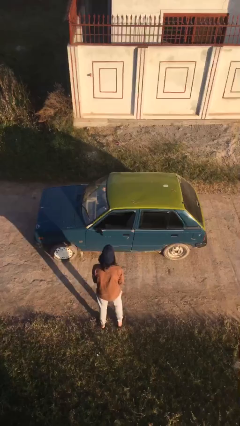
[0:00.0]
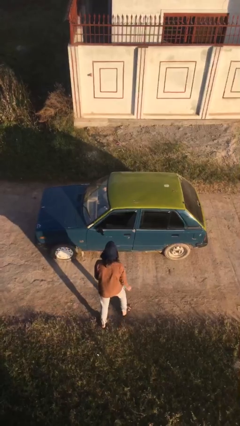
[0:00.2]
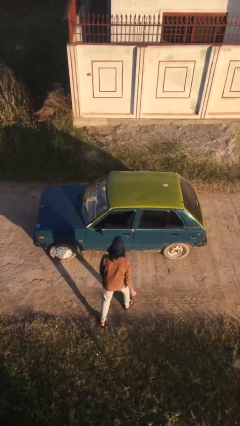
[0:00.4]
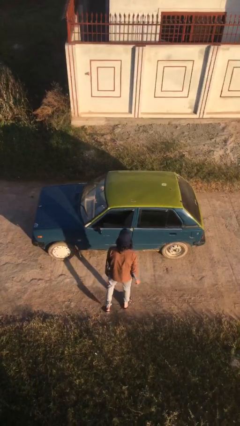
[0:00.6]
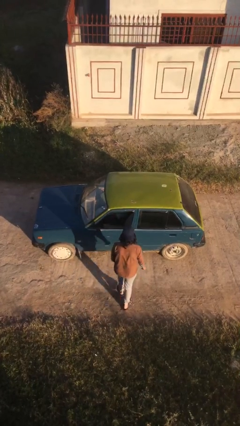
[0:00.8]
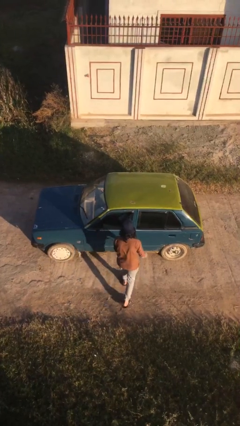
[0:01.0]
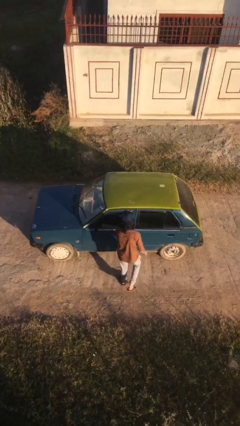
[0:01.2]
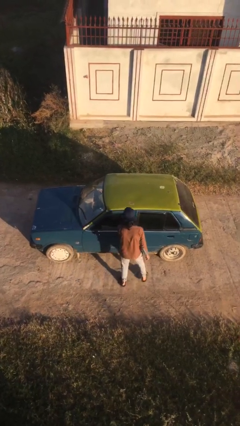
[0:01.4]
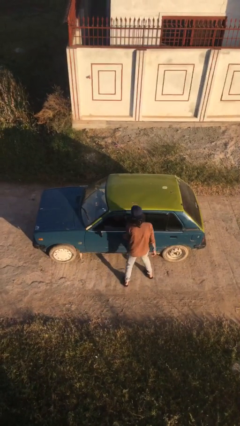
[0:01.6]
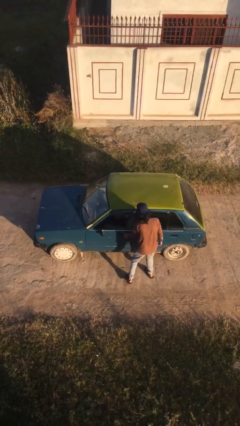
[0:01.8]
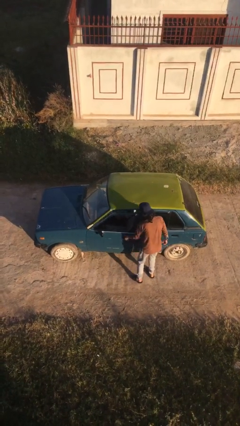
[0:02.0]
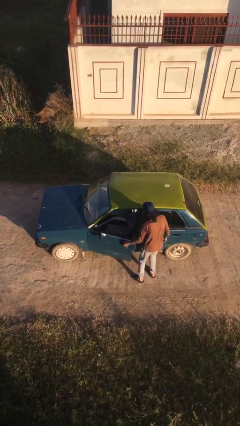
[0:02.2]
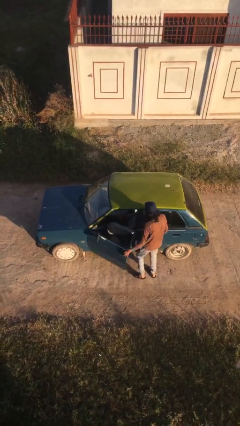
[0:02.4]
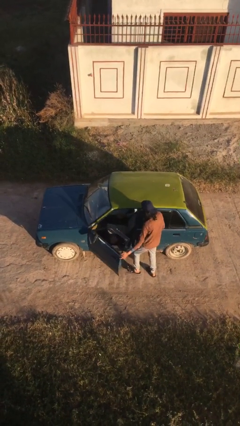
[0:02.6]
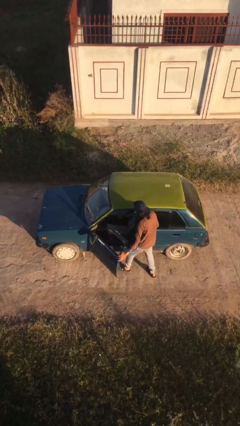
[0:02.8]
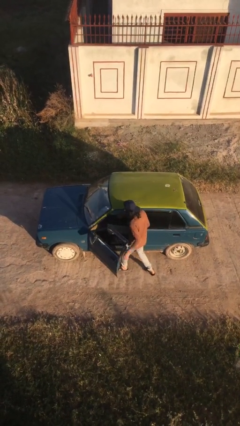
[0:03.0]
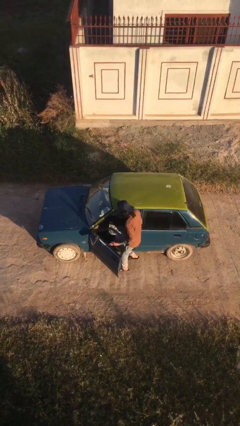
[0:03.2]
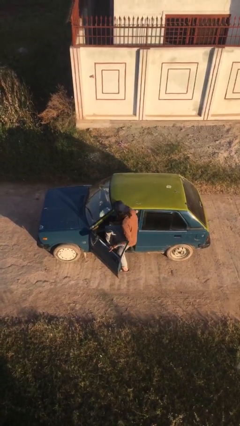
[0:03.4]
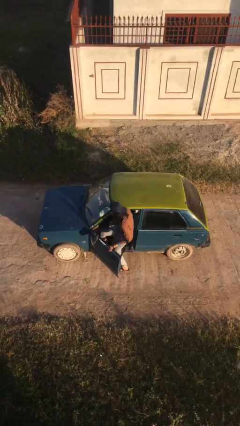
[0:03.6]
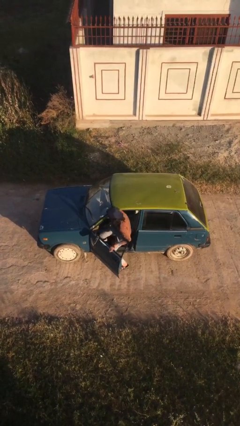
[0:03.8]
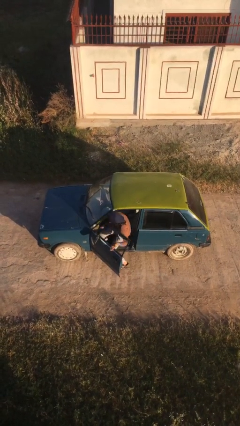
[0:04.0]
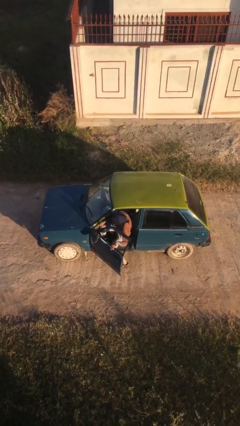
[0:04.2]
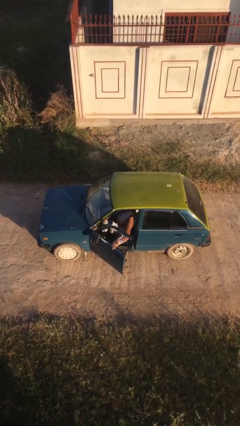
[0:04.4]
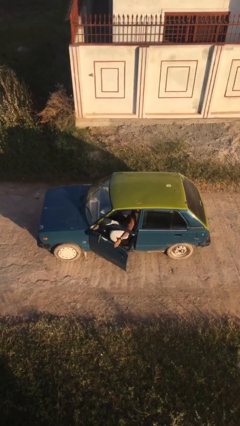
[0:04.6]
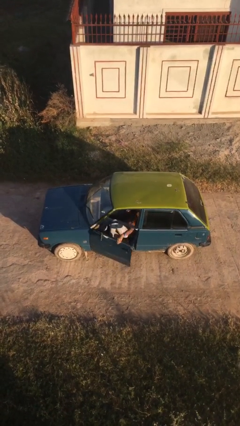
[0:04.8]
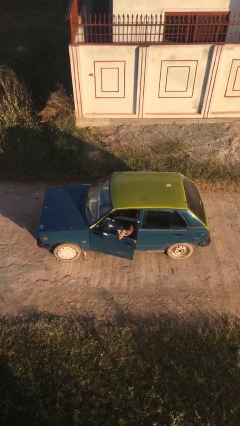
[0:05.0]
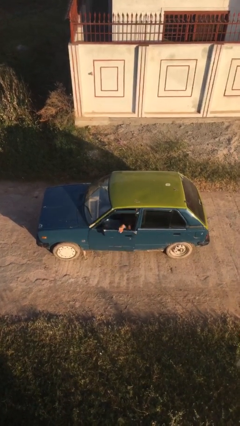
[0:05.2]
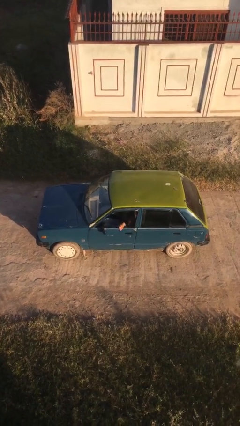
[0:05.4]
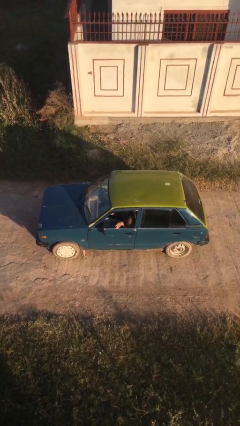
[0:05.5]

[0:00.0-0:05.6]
car picks up person

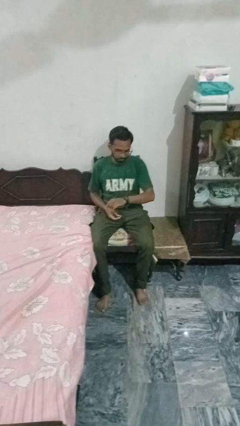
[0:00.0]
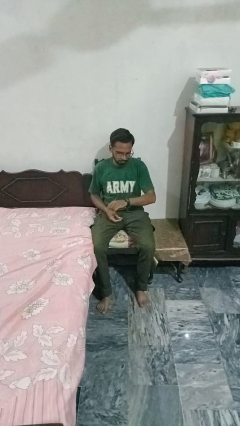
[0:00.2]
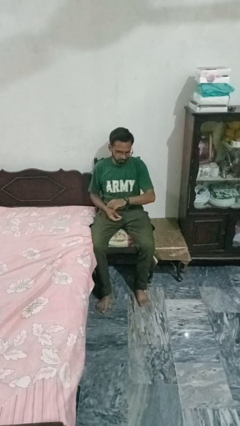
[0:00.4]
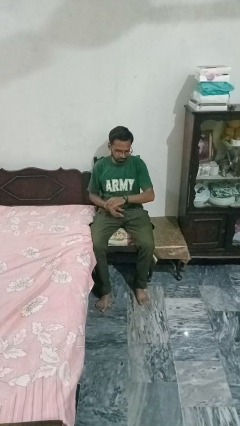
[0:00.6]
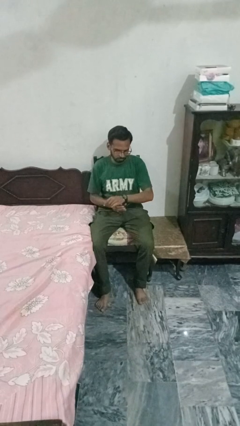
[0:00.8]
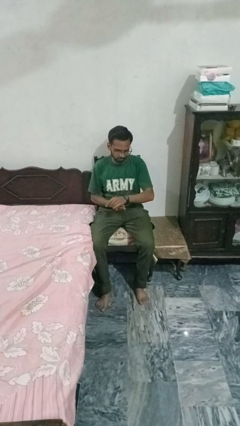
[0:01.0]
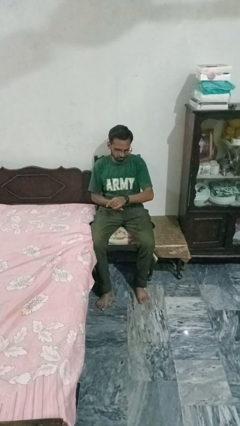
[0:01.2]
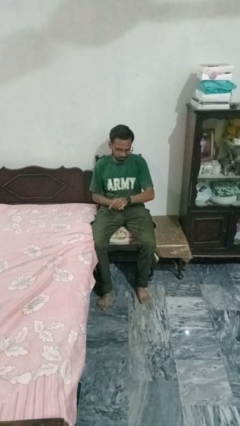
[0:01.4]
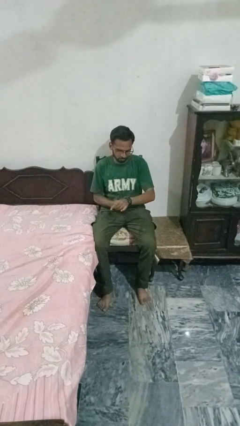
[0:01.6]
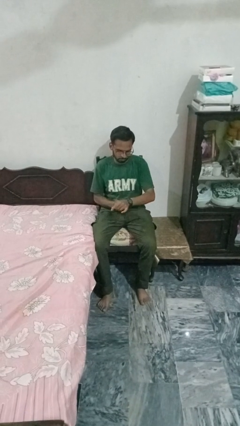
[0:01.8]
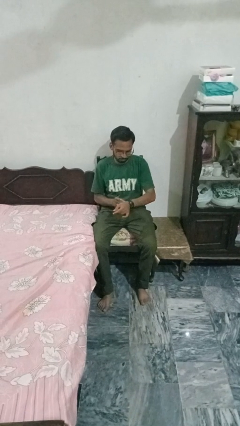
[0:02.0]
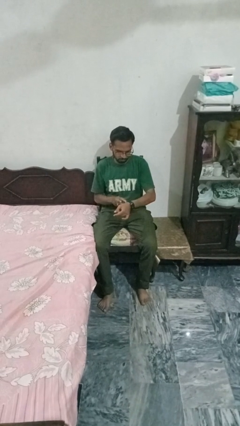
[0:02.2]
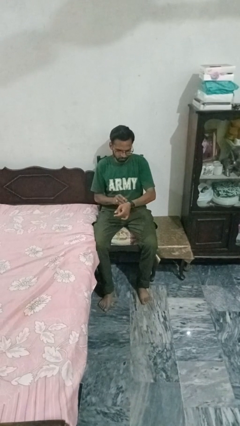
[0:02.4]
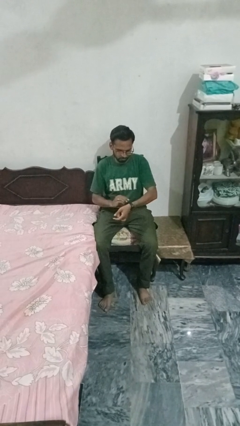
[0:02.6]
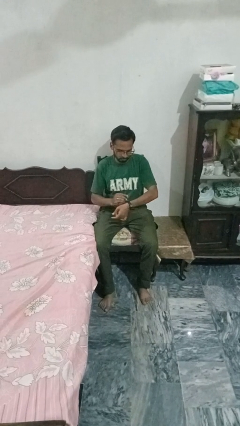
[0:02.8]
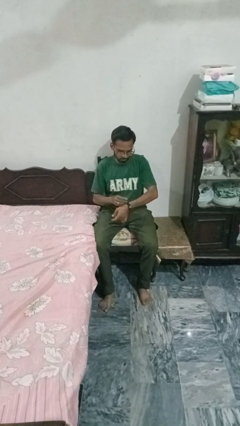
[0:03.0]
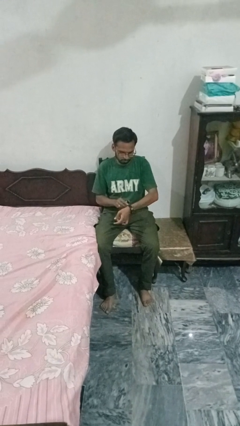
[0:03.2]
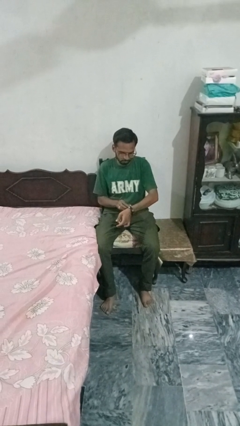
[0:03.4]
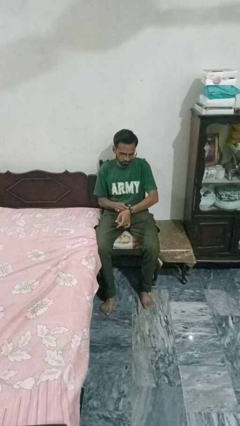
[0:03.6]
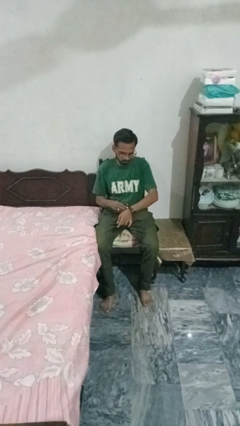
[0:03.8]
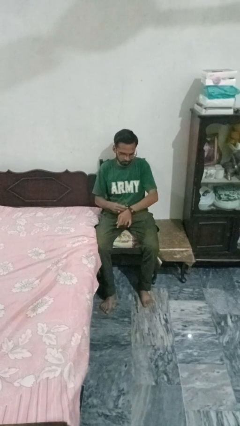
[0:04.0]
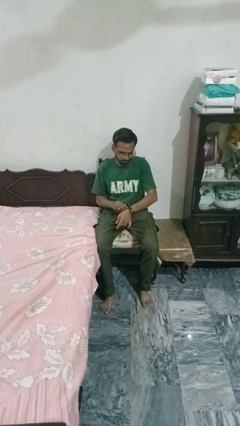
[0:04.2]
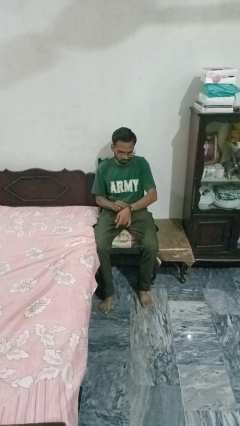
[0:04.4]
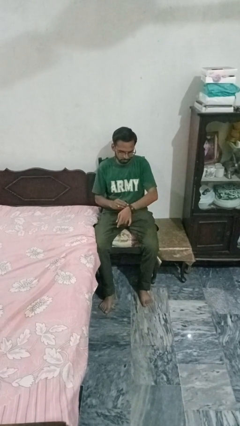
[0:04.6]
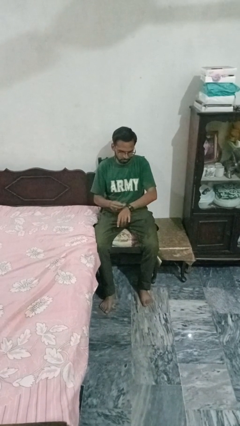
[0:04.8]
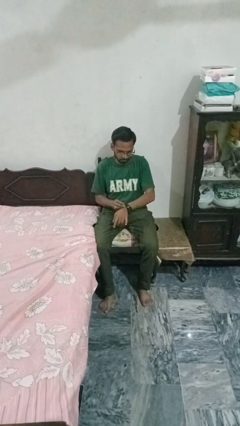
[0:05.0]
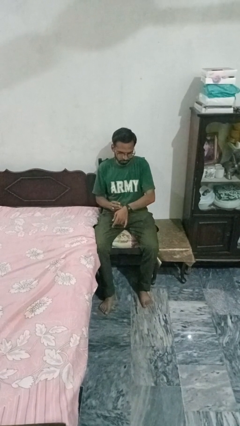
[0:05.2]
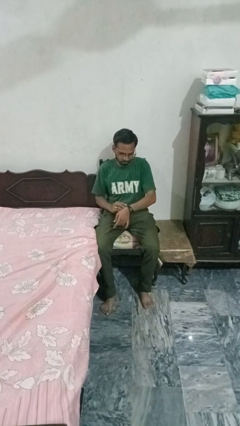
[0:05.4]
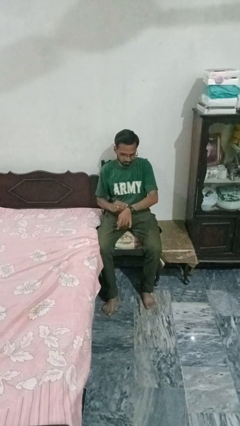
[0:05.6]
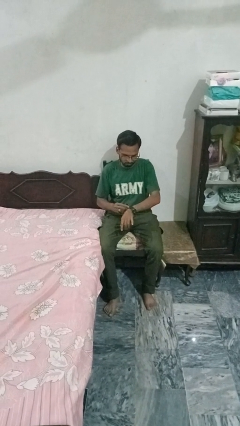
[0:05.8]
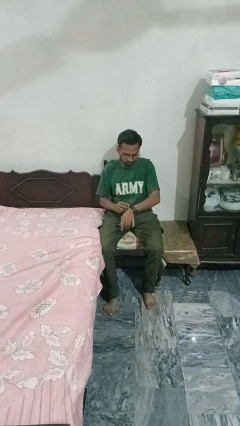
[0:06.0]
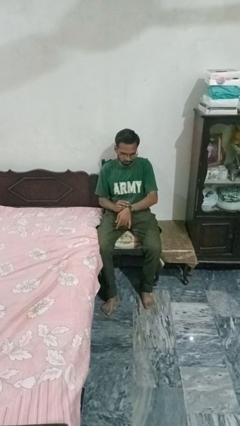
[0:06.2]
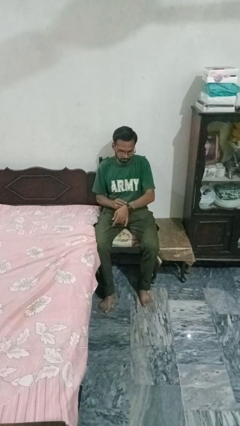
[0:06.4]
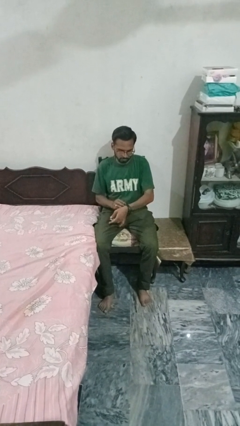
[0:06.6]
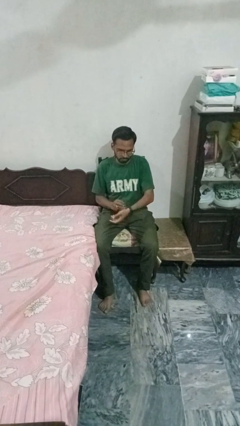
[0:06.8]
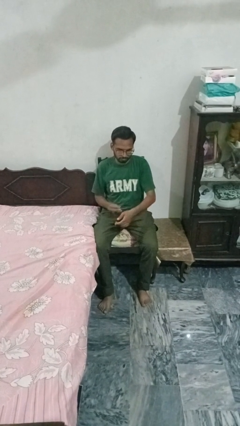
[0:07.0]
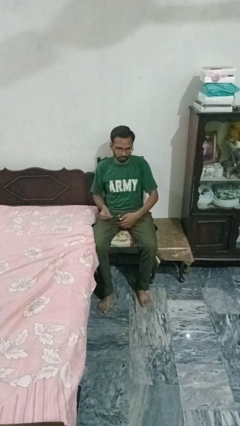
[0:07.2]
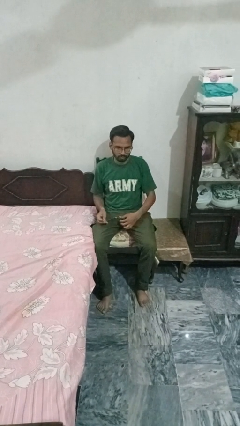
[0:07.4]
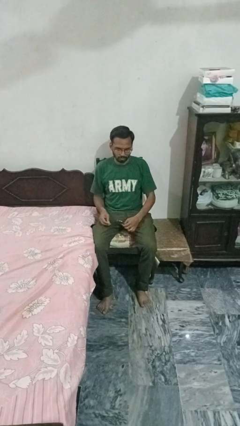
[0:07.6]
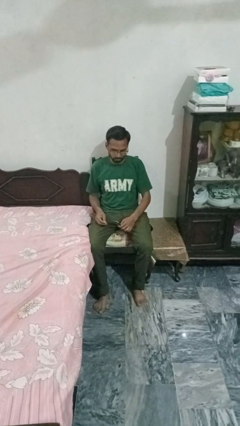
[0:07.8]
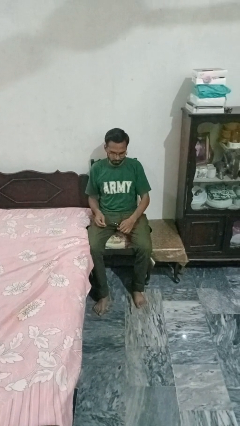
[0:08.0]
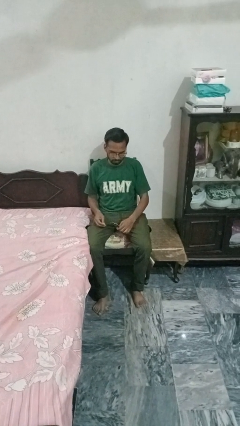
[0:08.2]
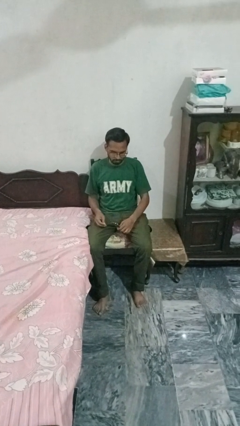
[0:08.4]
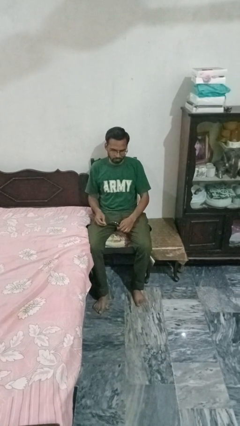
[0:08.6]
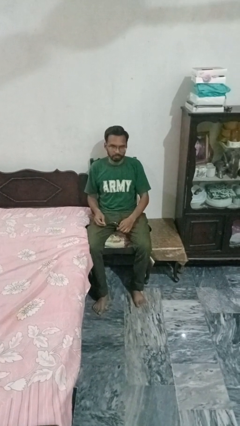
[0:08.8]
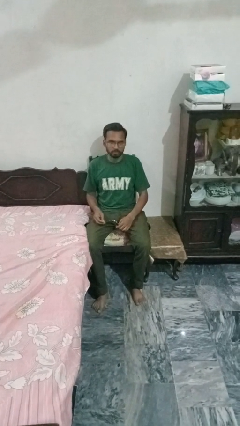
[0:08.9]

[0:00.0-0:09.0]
person takes off wristwatch

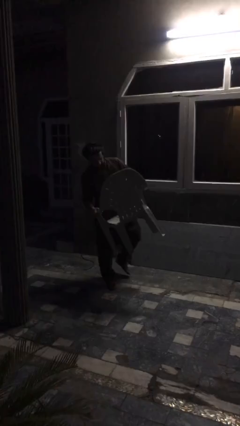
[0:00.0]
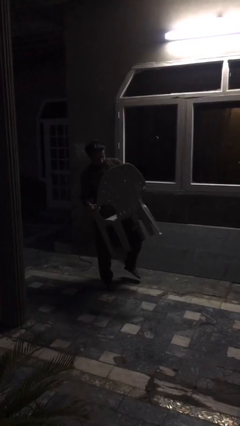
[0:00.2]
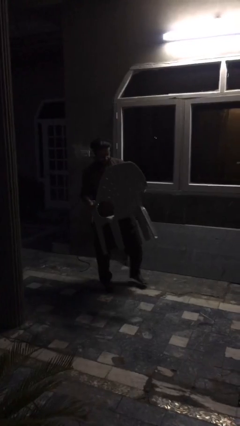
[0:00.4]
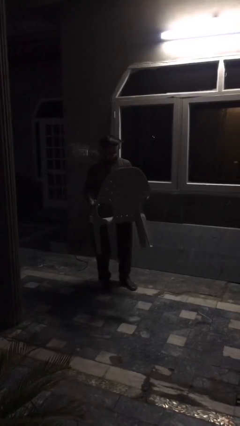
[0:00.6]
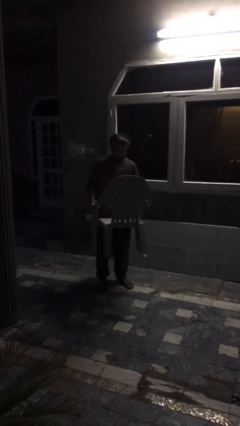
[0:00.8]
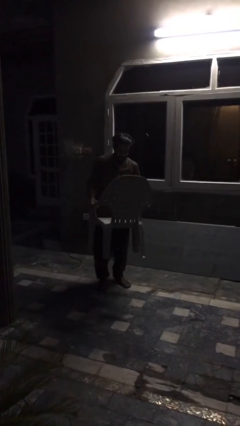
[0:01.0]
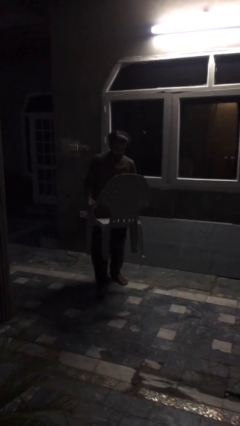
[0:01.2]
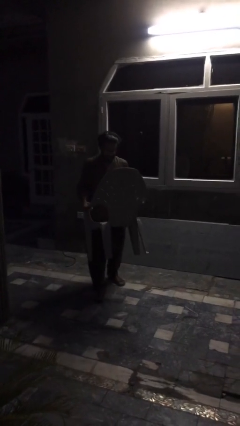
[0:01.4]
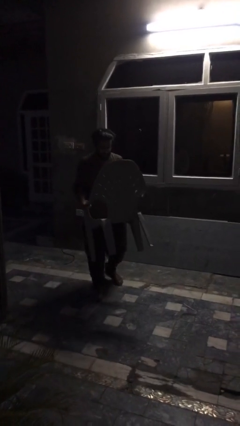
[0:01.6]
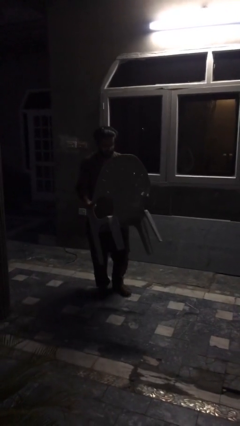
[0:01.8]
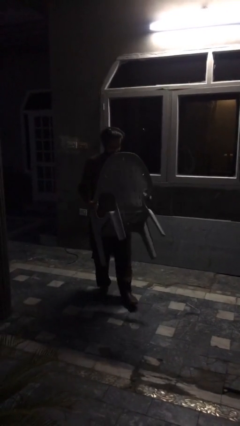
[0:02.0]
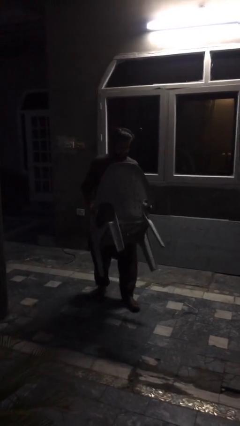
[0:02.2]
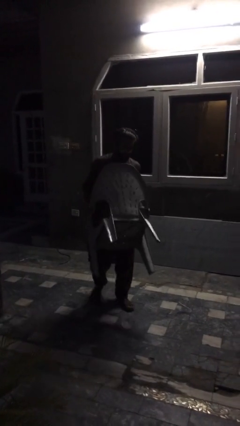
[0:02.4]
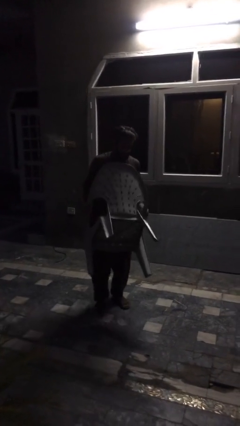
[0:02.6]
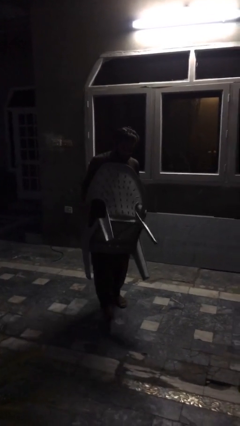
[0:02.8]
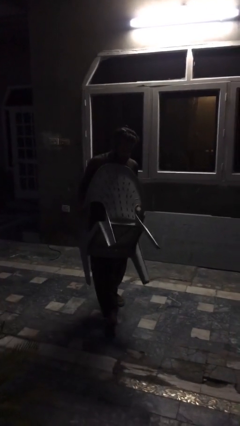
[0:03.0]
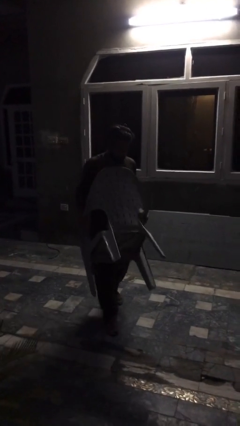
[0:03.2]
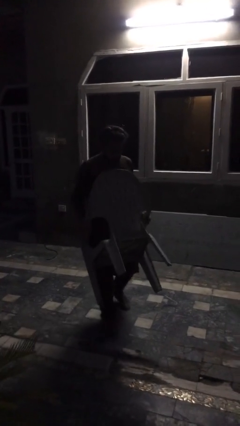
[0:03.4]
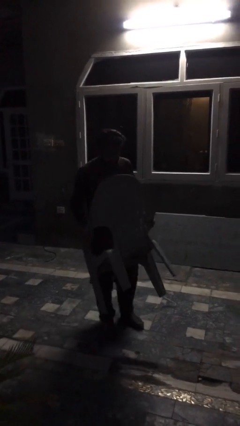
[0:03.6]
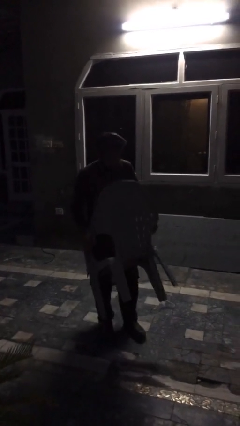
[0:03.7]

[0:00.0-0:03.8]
person carries heavy object
